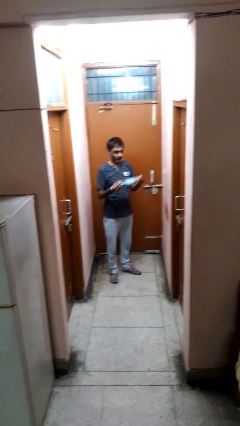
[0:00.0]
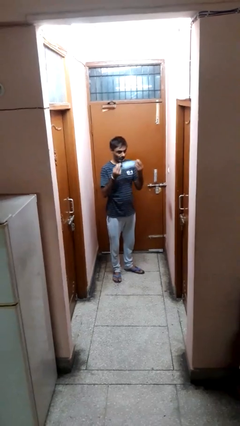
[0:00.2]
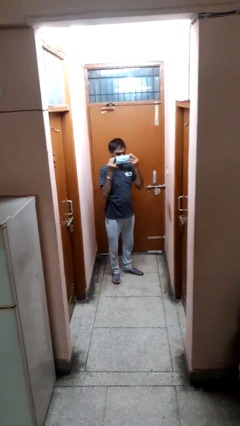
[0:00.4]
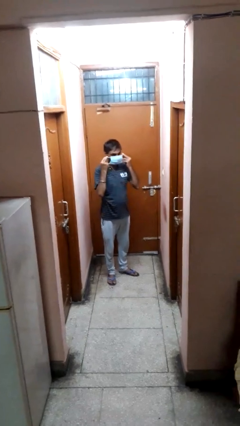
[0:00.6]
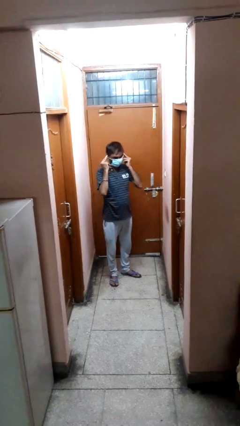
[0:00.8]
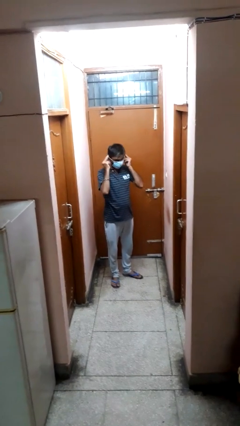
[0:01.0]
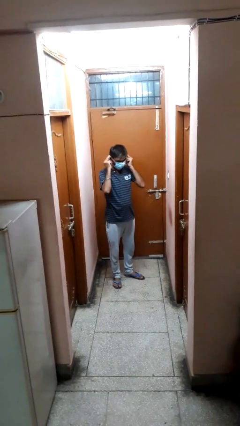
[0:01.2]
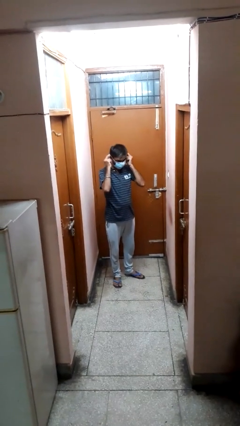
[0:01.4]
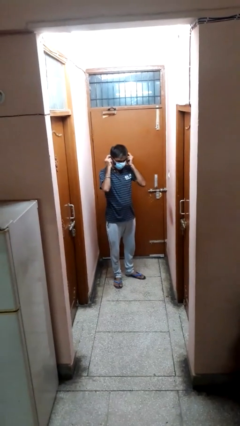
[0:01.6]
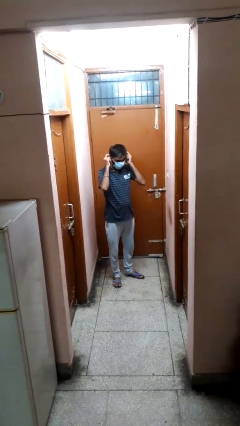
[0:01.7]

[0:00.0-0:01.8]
person puts on facemask

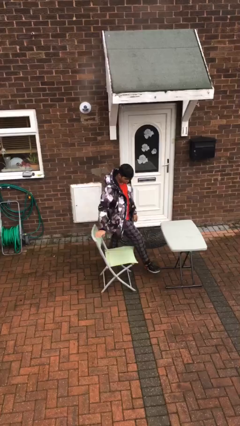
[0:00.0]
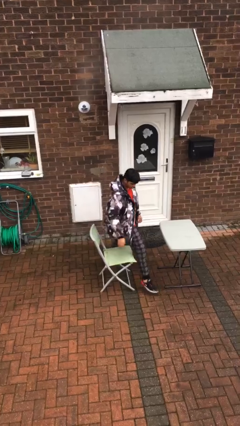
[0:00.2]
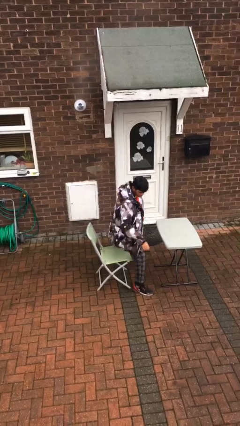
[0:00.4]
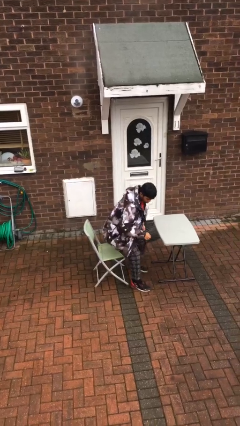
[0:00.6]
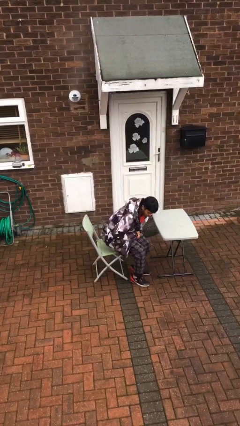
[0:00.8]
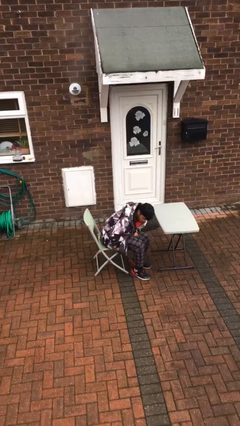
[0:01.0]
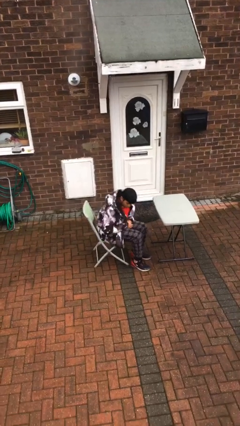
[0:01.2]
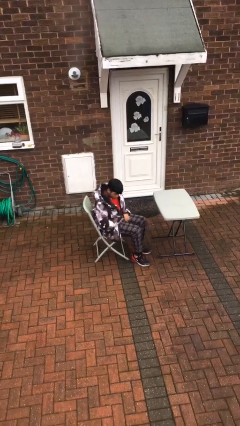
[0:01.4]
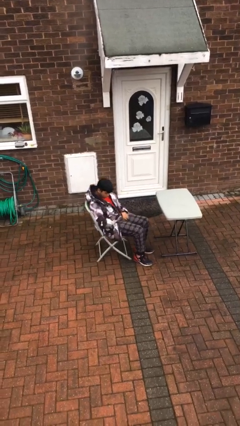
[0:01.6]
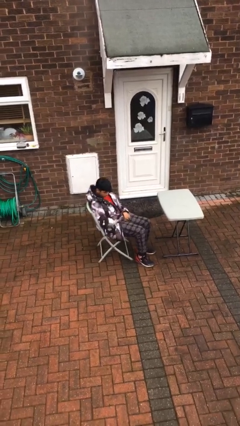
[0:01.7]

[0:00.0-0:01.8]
person sits down

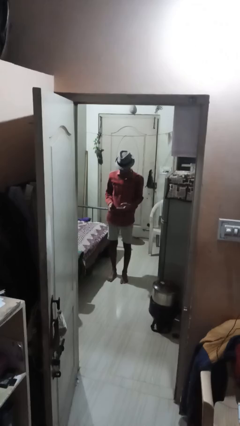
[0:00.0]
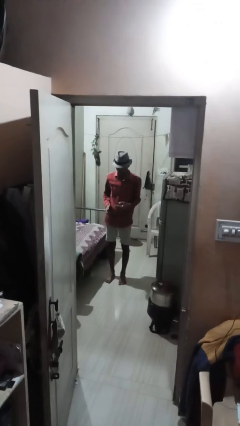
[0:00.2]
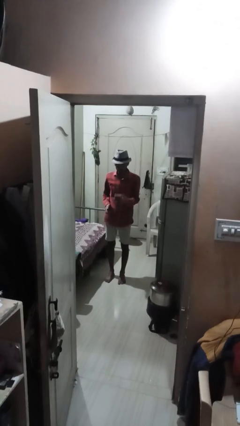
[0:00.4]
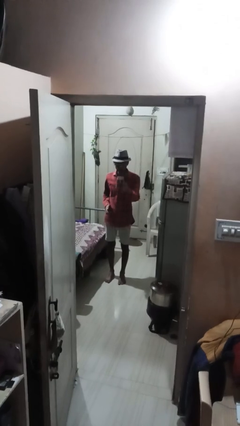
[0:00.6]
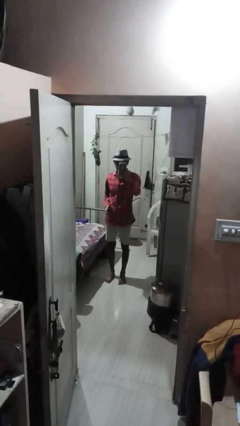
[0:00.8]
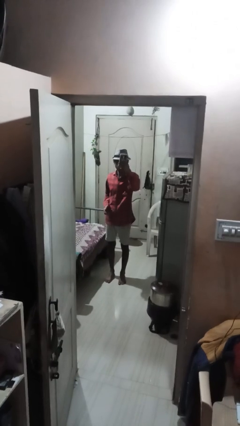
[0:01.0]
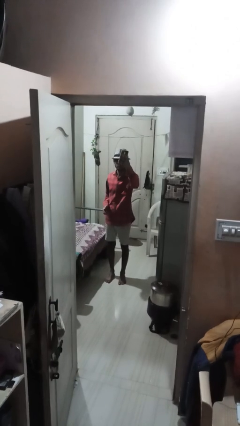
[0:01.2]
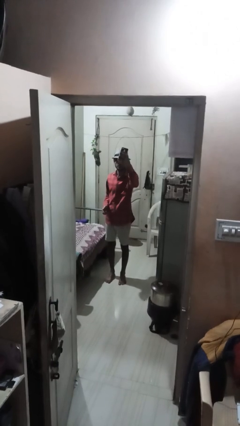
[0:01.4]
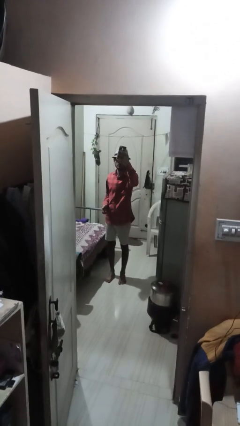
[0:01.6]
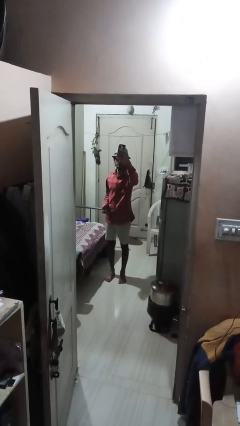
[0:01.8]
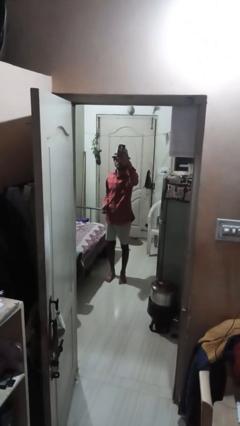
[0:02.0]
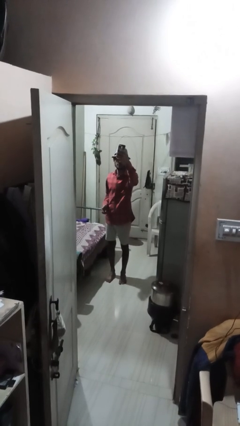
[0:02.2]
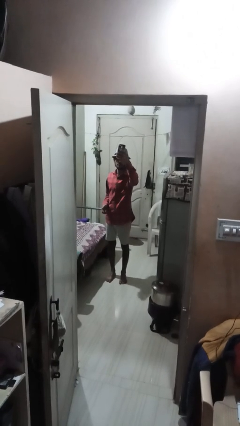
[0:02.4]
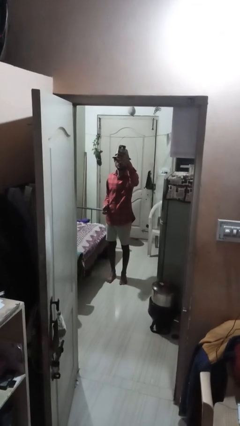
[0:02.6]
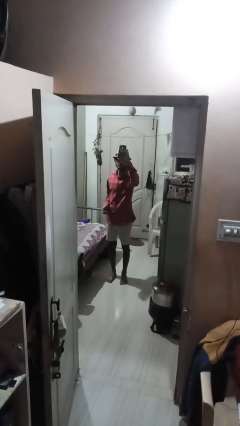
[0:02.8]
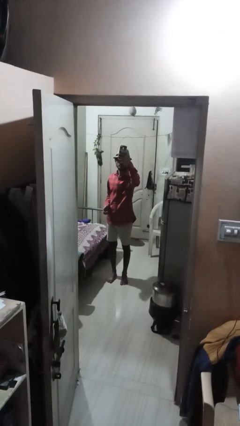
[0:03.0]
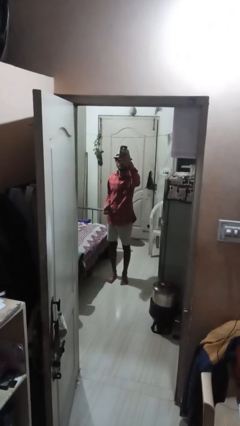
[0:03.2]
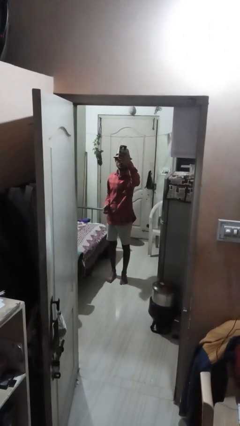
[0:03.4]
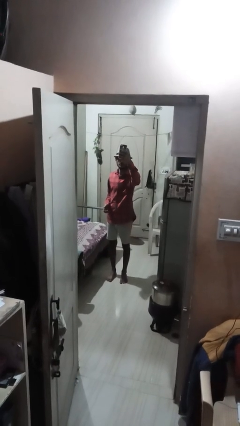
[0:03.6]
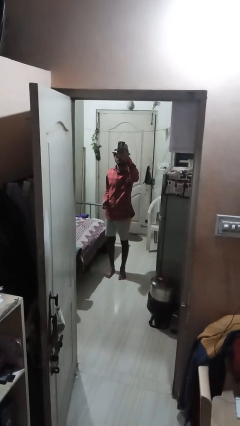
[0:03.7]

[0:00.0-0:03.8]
person takes selfie

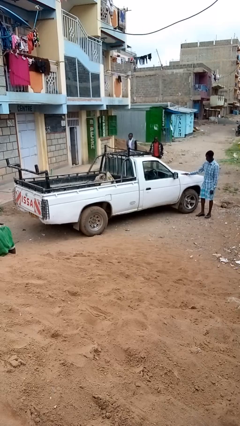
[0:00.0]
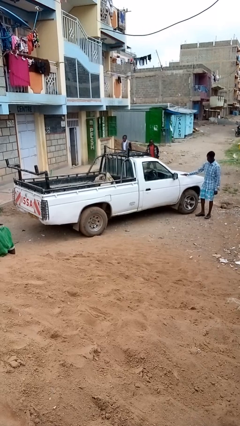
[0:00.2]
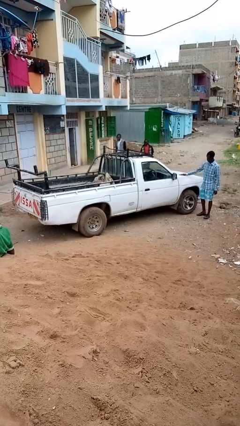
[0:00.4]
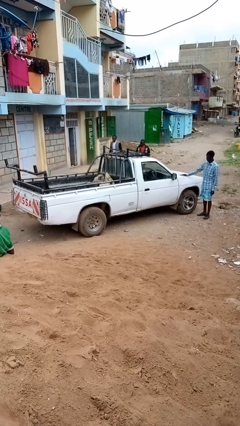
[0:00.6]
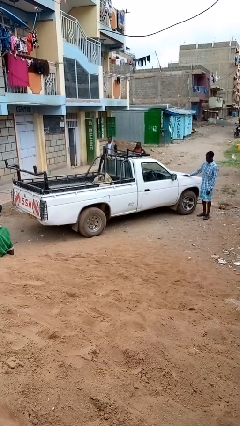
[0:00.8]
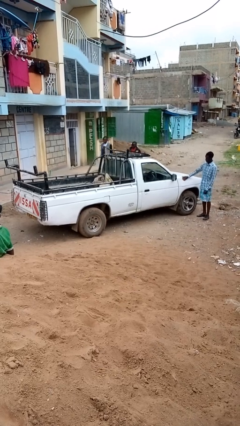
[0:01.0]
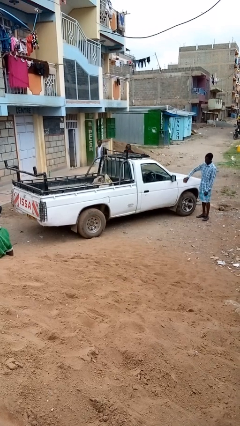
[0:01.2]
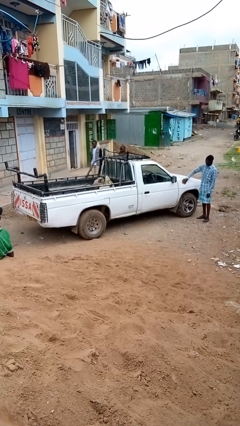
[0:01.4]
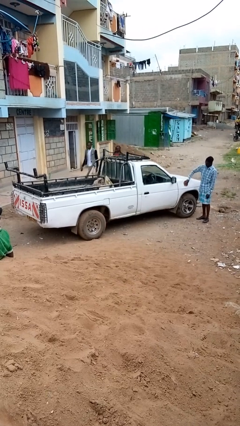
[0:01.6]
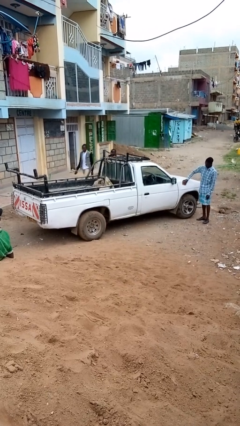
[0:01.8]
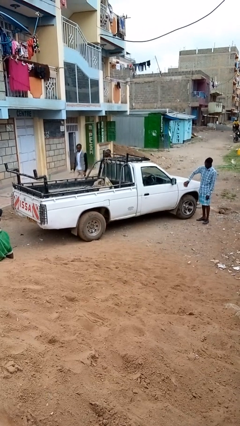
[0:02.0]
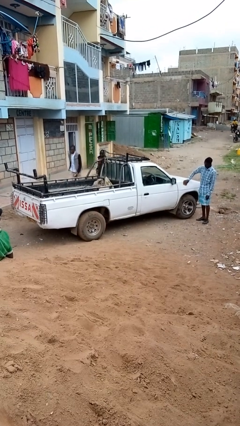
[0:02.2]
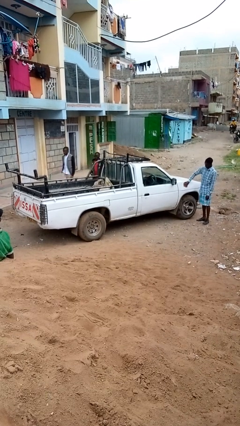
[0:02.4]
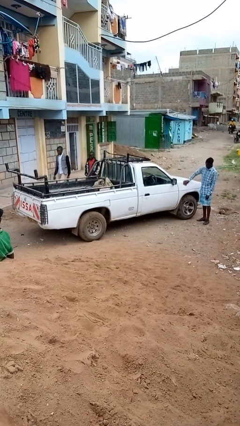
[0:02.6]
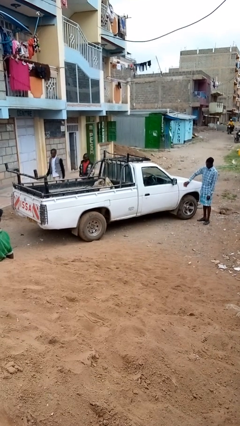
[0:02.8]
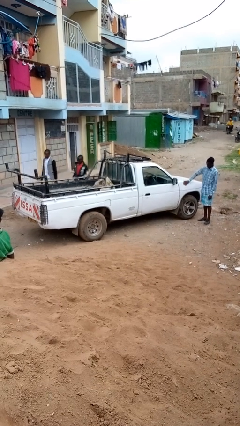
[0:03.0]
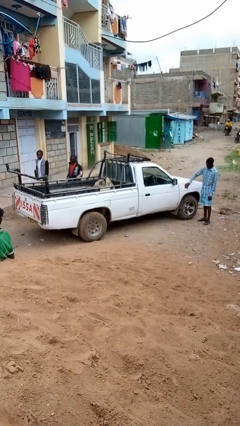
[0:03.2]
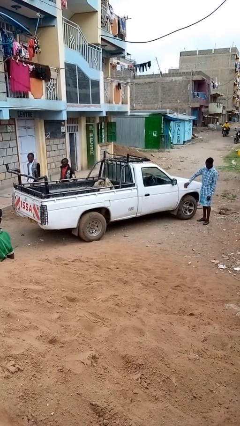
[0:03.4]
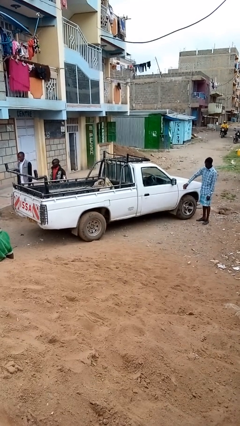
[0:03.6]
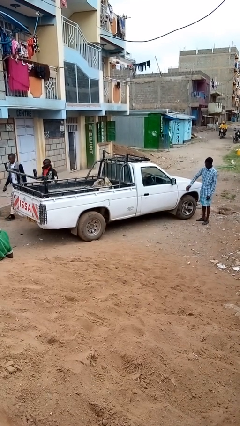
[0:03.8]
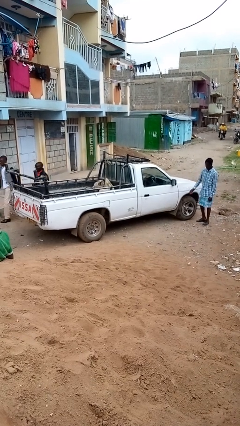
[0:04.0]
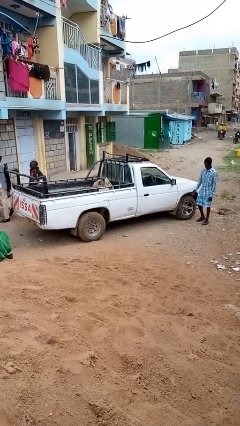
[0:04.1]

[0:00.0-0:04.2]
person polishes car with rag

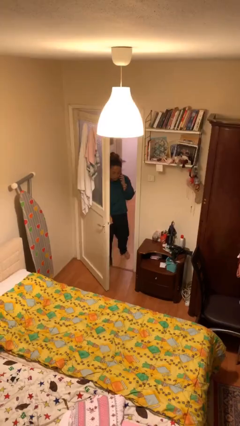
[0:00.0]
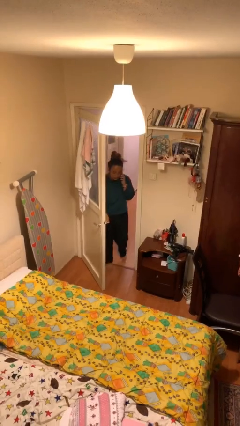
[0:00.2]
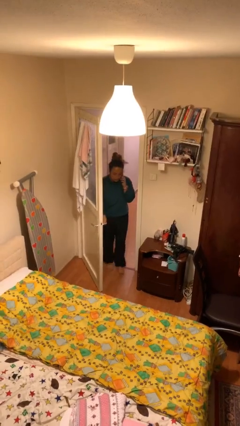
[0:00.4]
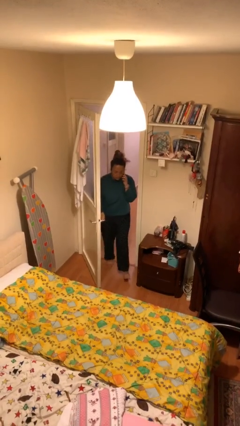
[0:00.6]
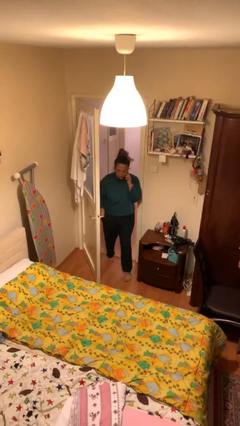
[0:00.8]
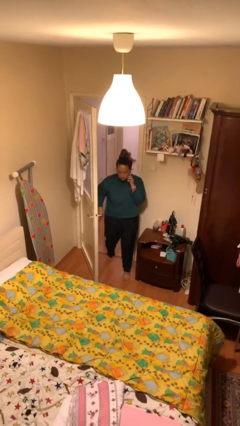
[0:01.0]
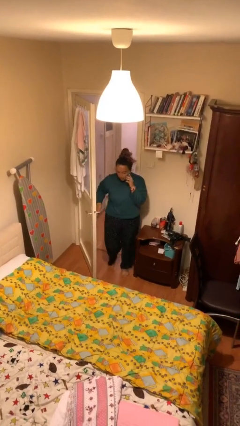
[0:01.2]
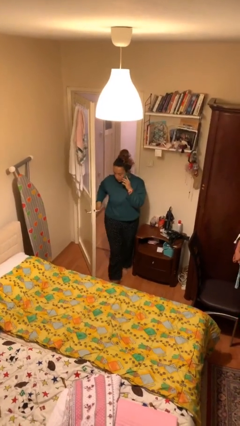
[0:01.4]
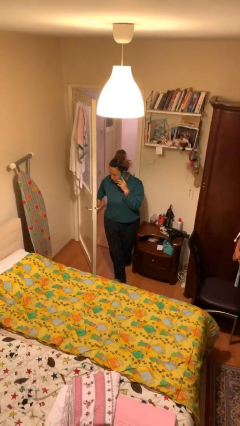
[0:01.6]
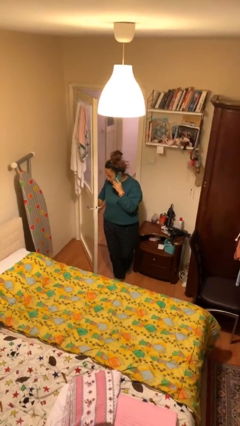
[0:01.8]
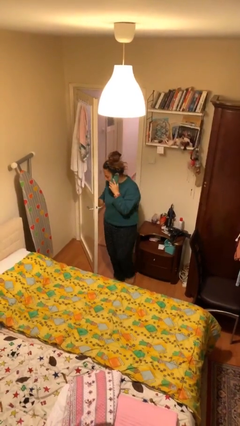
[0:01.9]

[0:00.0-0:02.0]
person enters scene through structure

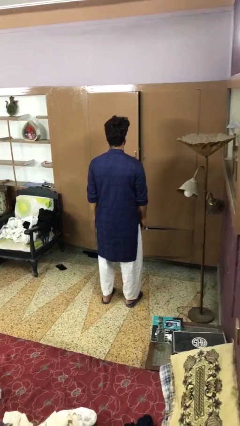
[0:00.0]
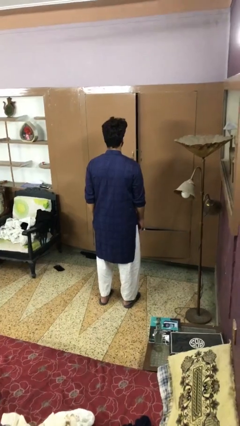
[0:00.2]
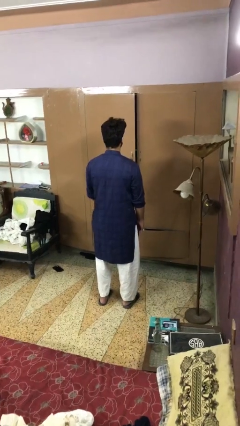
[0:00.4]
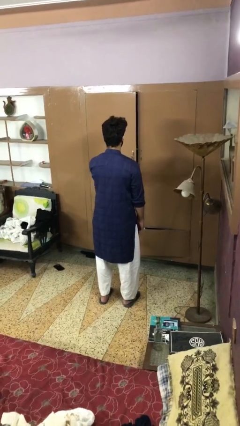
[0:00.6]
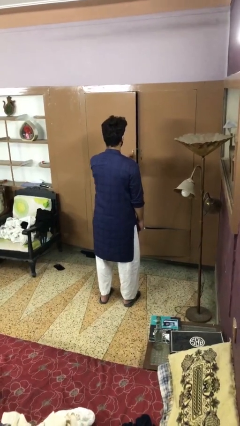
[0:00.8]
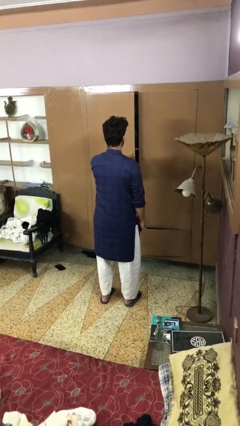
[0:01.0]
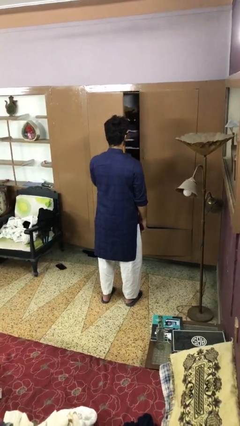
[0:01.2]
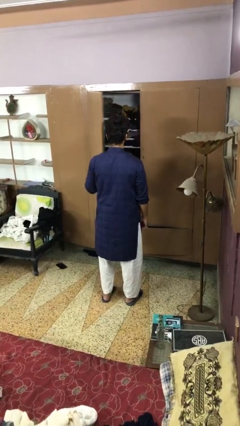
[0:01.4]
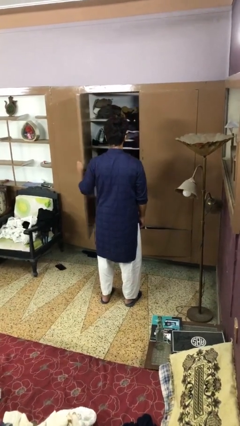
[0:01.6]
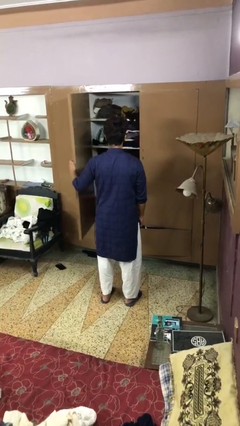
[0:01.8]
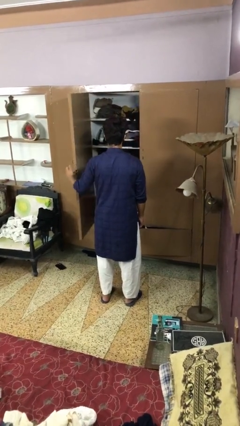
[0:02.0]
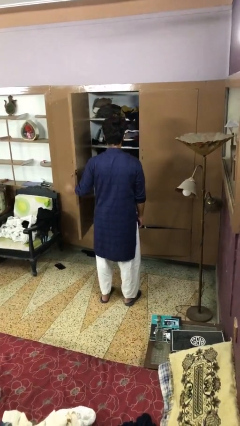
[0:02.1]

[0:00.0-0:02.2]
person opens closet door

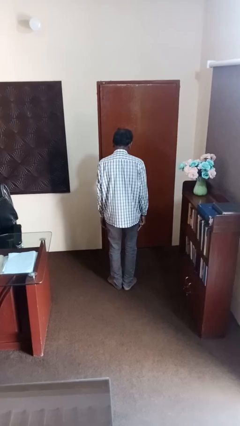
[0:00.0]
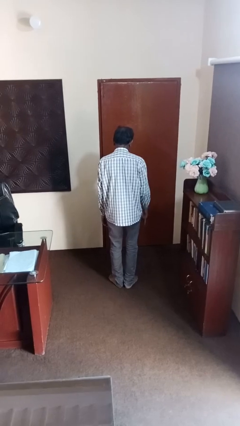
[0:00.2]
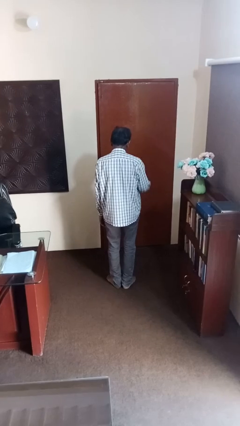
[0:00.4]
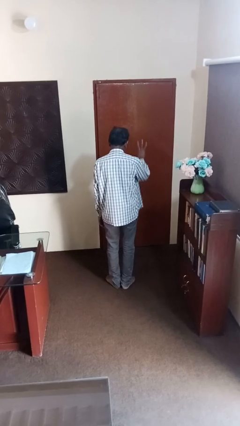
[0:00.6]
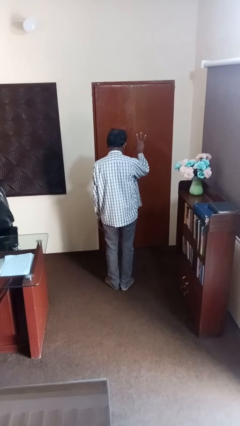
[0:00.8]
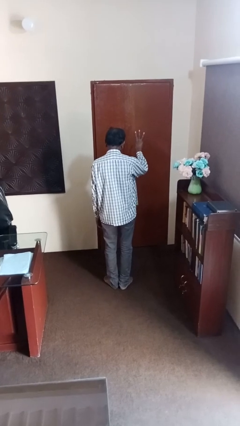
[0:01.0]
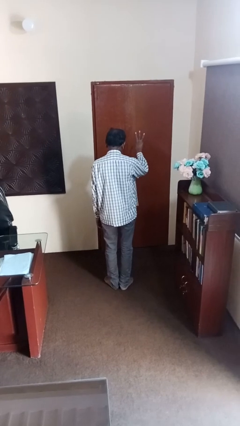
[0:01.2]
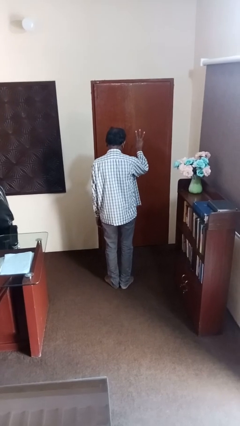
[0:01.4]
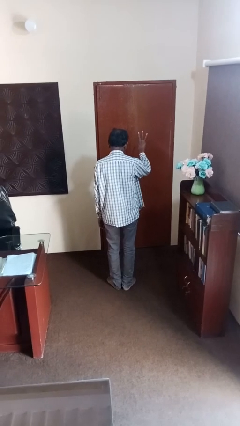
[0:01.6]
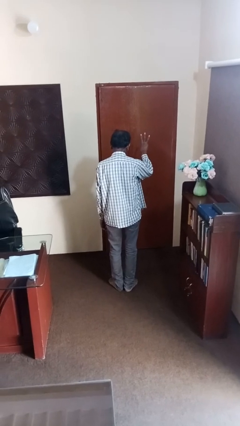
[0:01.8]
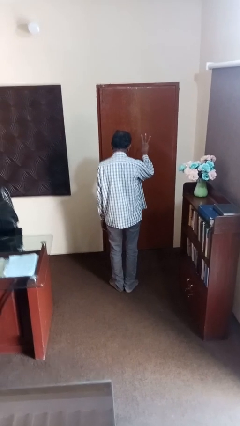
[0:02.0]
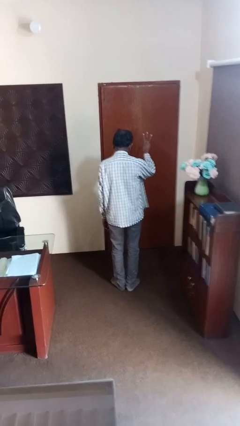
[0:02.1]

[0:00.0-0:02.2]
person gestures number three
